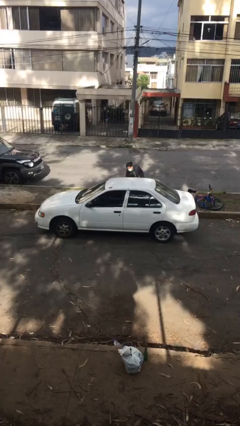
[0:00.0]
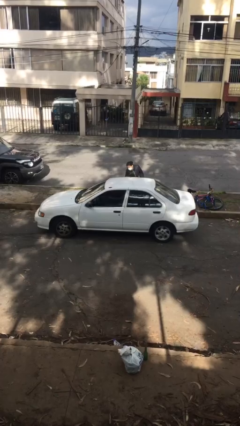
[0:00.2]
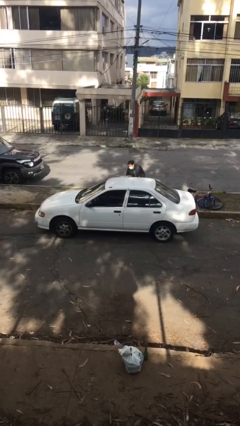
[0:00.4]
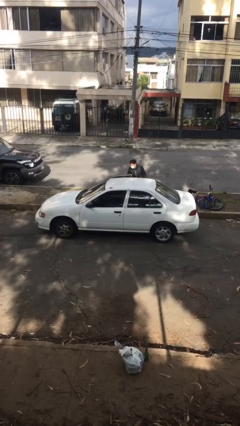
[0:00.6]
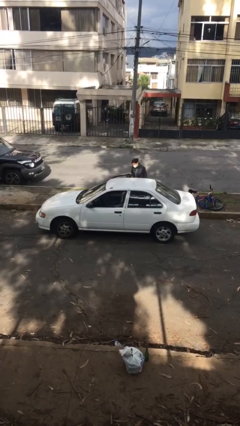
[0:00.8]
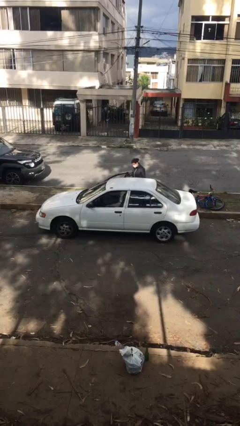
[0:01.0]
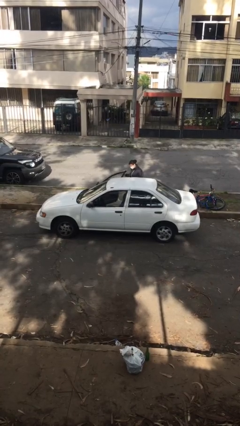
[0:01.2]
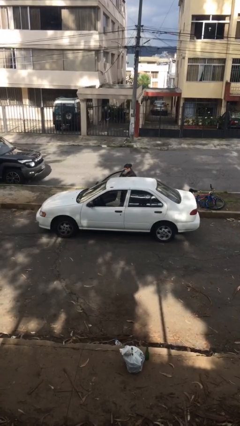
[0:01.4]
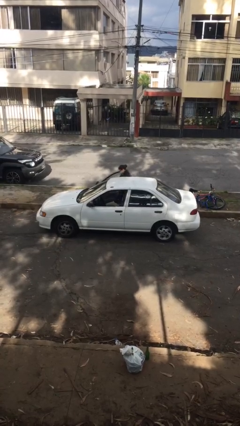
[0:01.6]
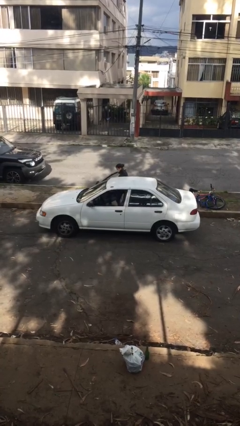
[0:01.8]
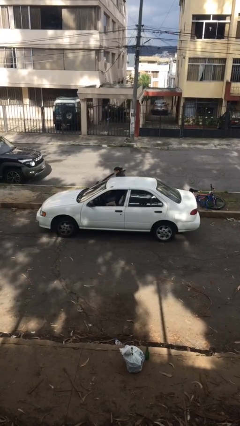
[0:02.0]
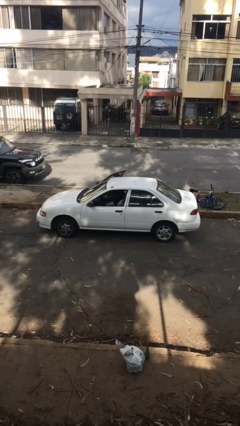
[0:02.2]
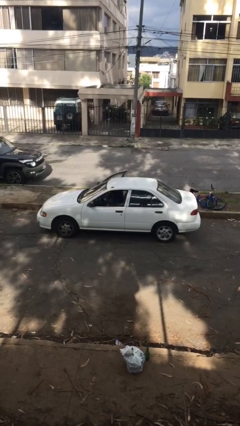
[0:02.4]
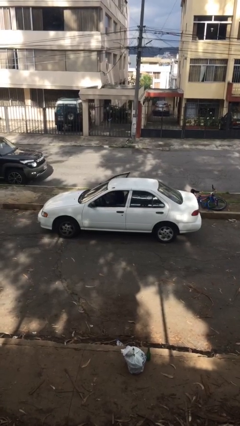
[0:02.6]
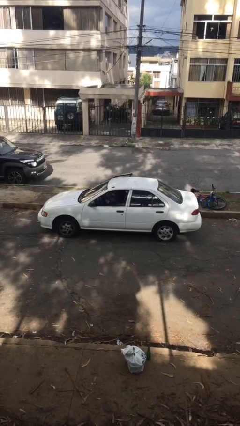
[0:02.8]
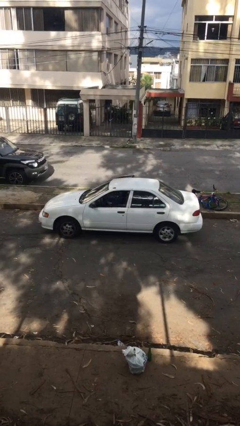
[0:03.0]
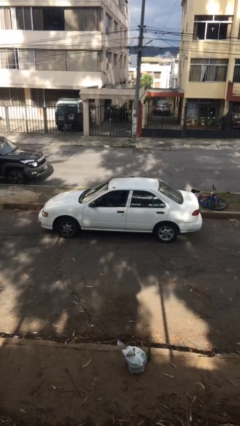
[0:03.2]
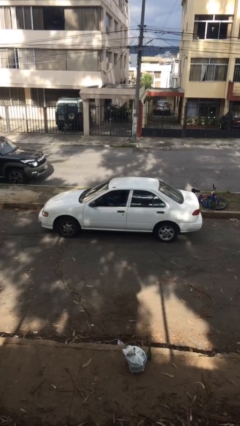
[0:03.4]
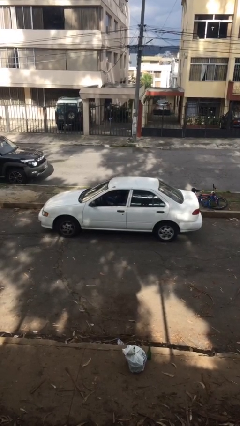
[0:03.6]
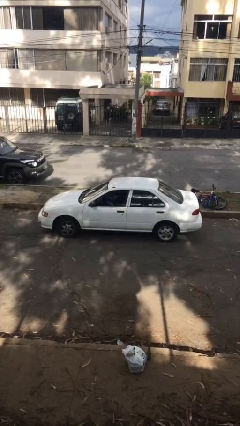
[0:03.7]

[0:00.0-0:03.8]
car picks up person

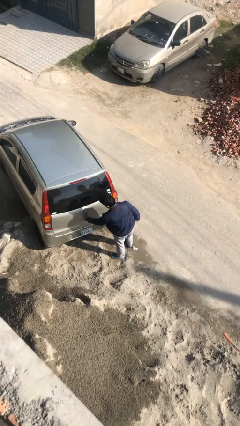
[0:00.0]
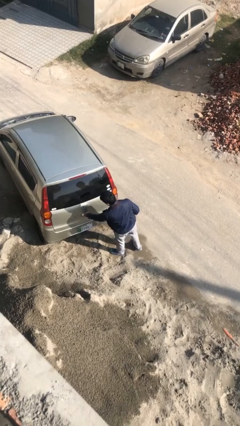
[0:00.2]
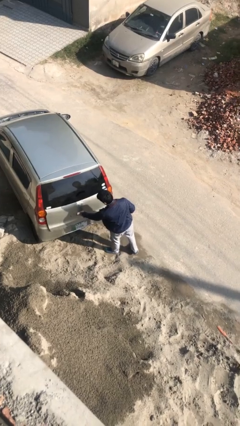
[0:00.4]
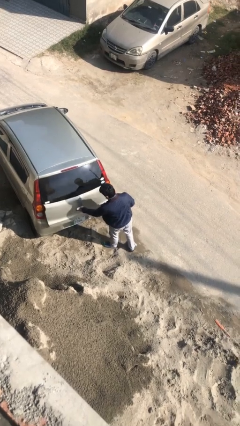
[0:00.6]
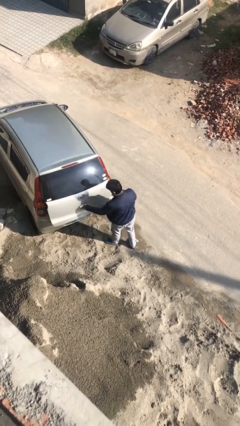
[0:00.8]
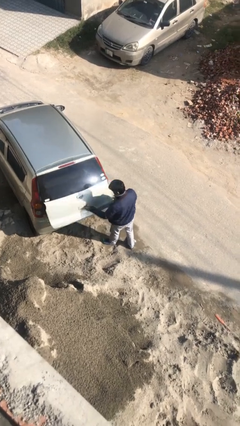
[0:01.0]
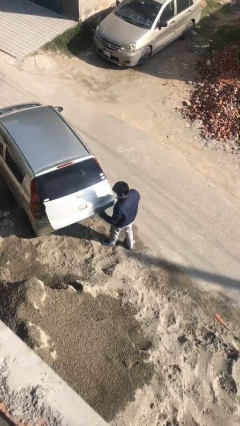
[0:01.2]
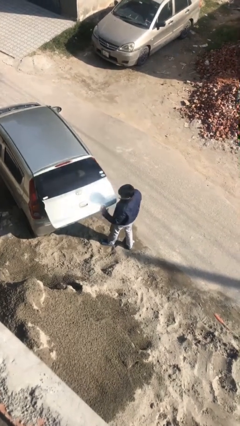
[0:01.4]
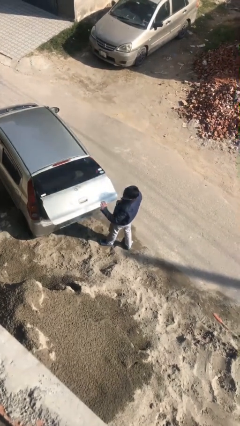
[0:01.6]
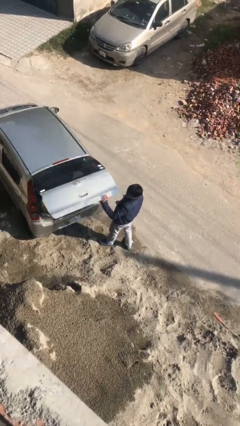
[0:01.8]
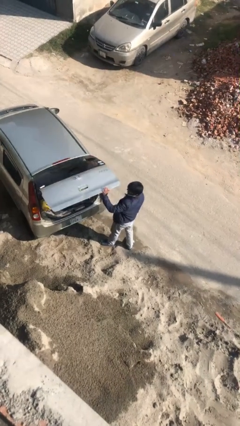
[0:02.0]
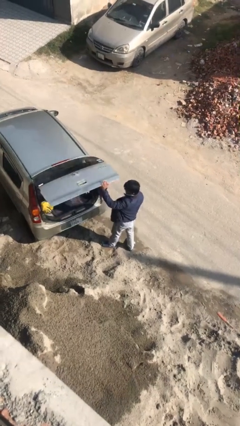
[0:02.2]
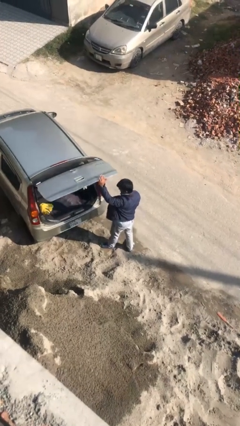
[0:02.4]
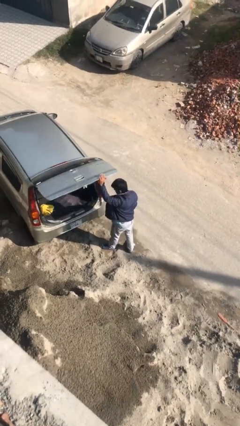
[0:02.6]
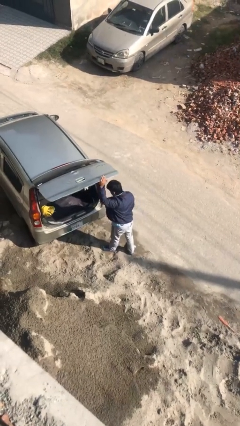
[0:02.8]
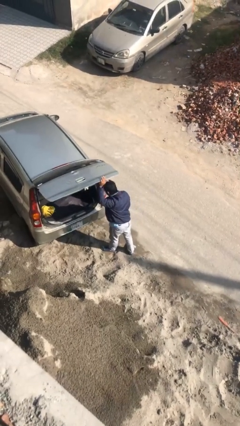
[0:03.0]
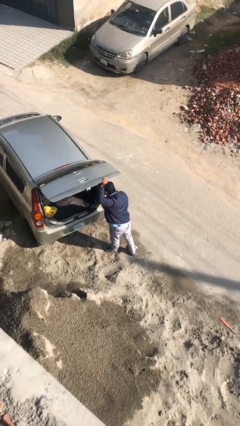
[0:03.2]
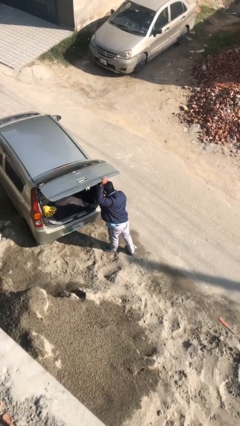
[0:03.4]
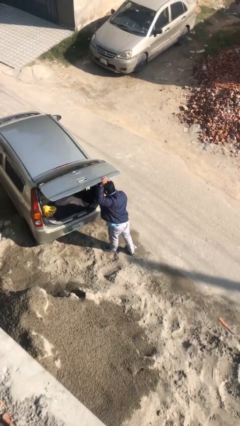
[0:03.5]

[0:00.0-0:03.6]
person opens car trunk

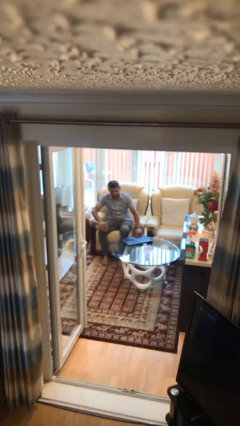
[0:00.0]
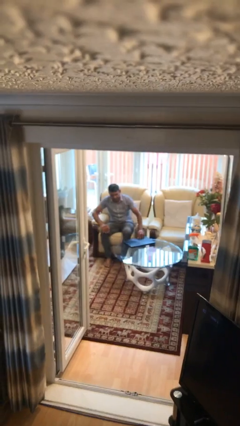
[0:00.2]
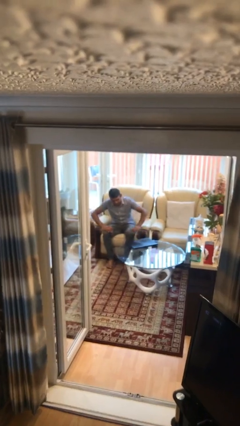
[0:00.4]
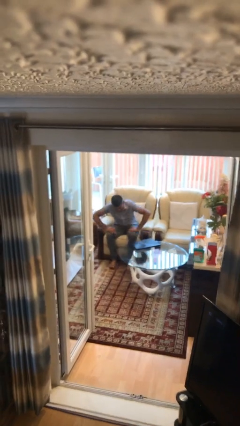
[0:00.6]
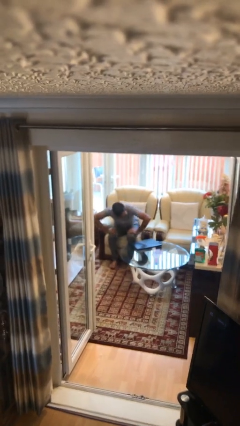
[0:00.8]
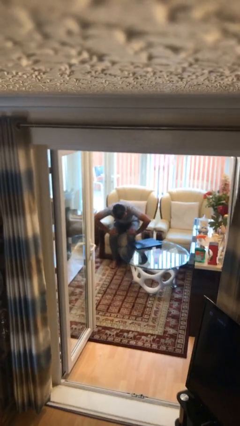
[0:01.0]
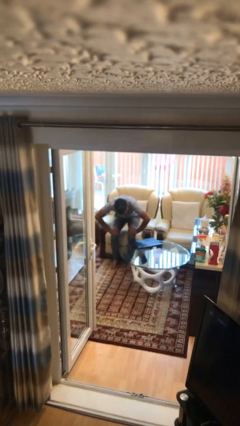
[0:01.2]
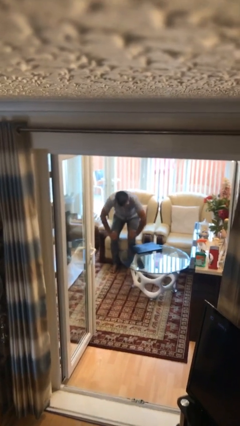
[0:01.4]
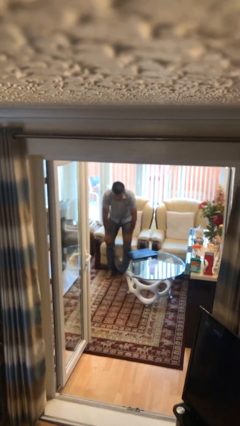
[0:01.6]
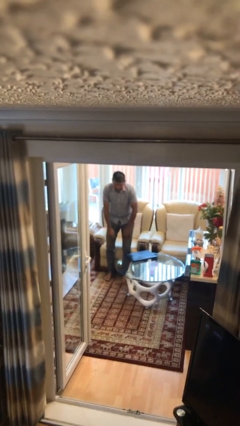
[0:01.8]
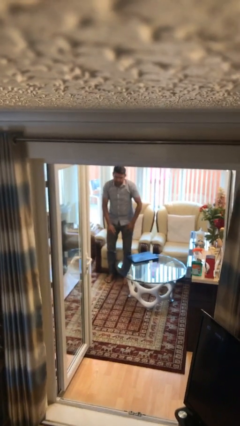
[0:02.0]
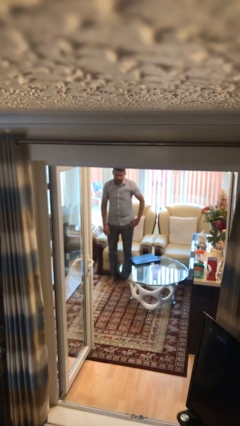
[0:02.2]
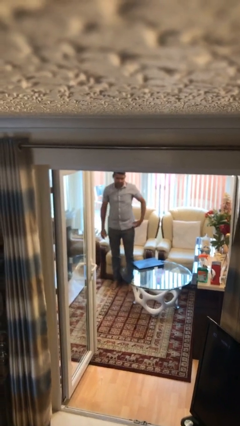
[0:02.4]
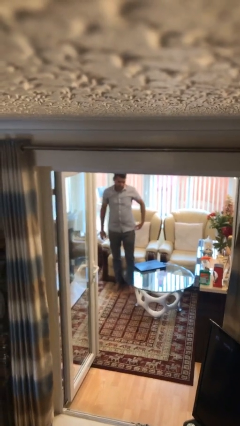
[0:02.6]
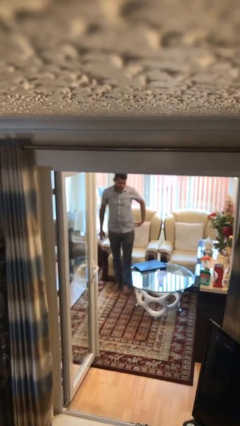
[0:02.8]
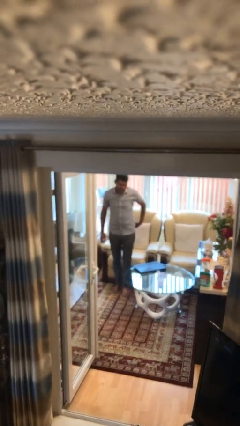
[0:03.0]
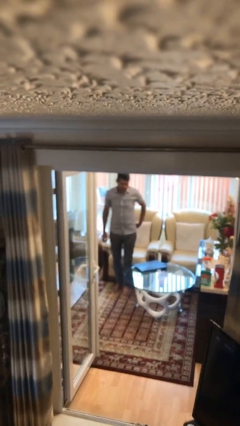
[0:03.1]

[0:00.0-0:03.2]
person stands up

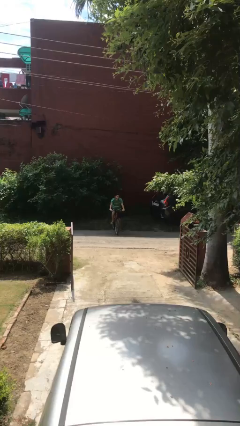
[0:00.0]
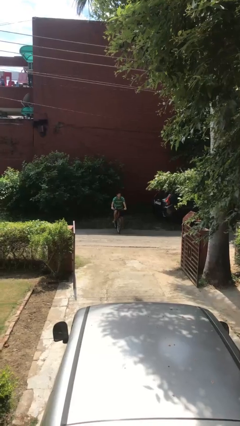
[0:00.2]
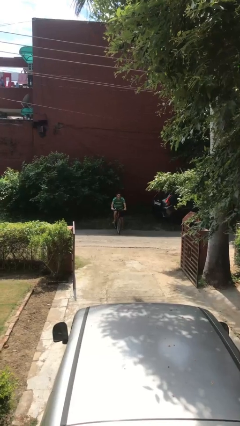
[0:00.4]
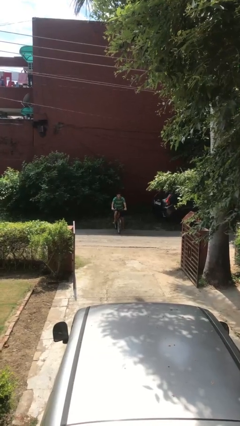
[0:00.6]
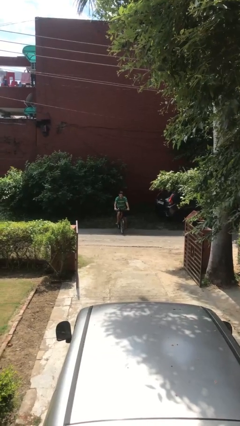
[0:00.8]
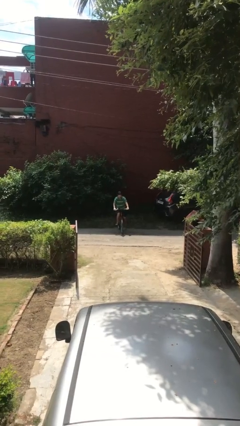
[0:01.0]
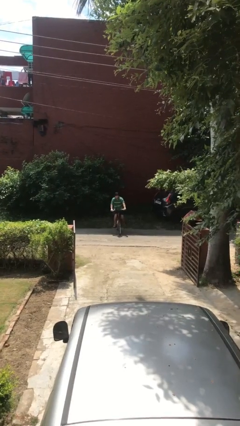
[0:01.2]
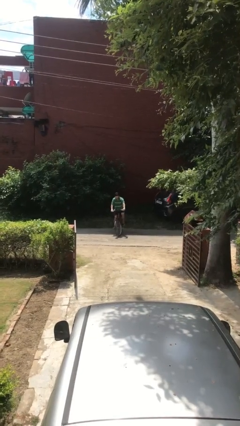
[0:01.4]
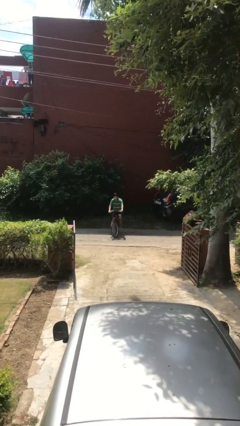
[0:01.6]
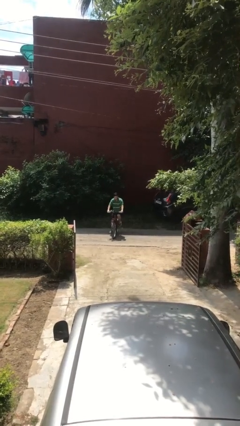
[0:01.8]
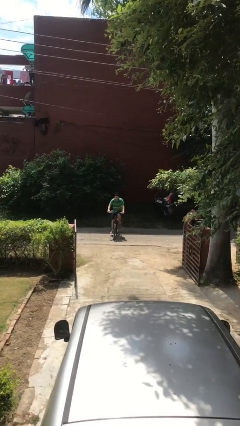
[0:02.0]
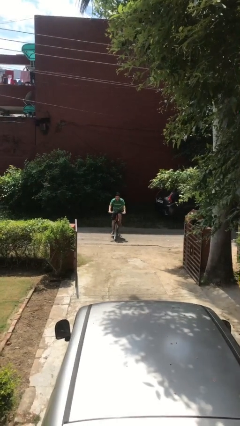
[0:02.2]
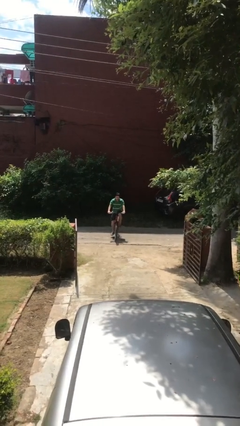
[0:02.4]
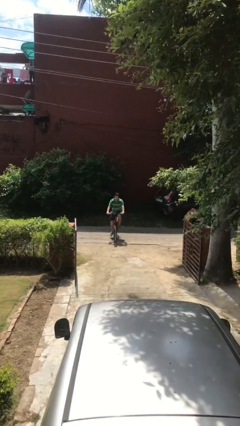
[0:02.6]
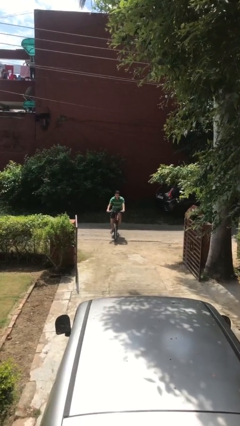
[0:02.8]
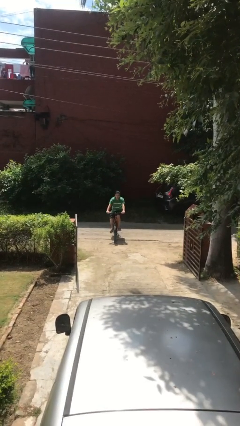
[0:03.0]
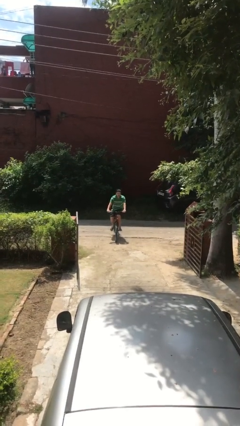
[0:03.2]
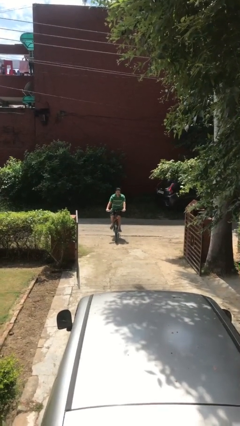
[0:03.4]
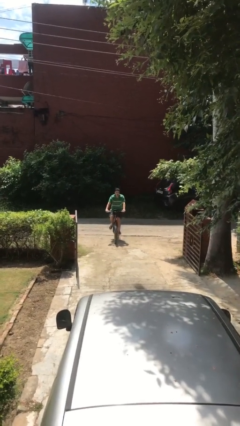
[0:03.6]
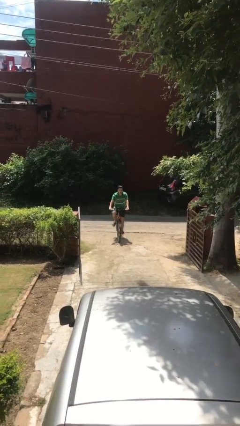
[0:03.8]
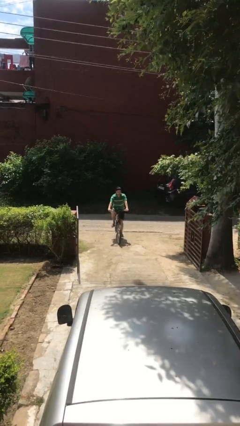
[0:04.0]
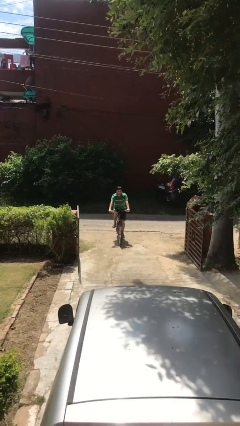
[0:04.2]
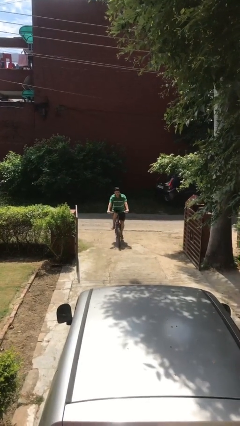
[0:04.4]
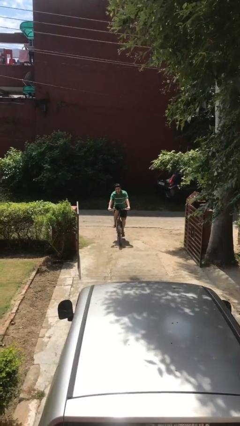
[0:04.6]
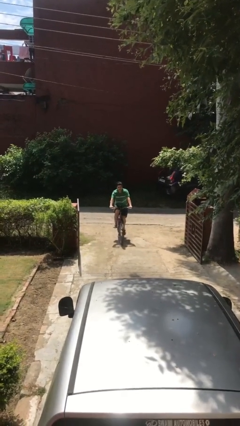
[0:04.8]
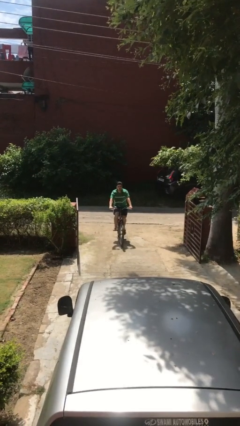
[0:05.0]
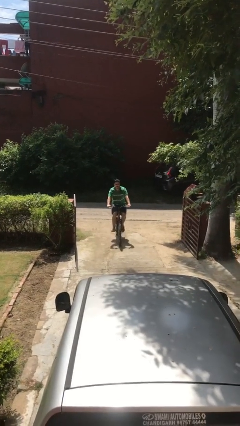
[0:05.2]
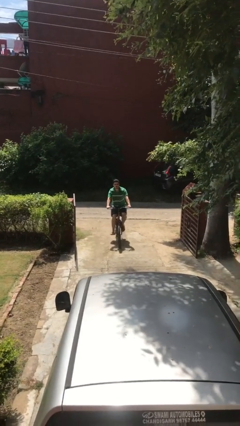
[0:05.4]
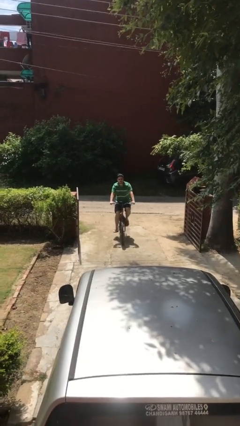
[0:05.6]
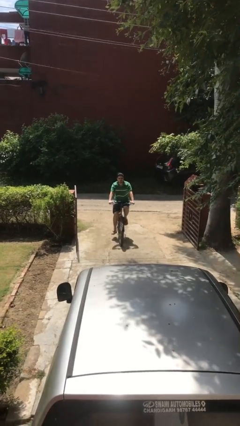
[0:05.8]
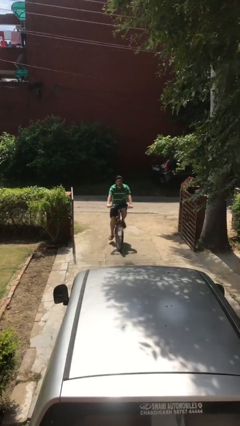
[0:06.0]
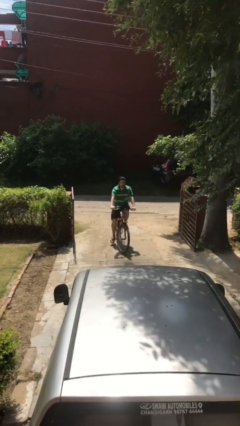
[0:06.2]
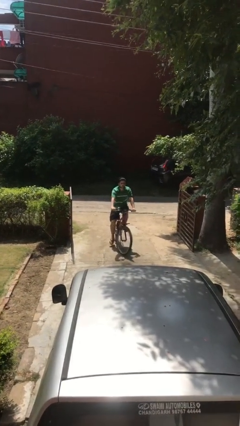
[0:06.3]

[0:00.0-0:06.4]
person rides bicycle

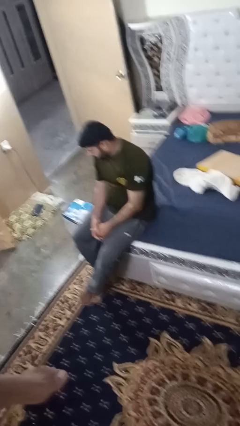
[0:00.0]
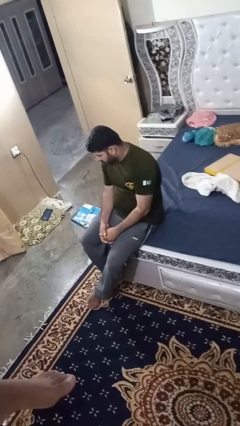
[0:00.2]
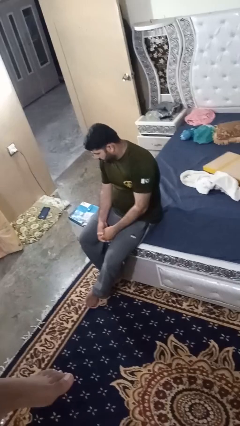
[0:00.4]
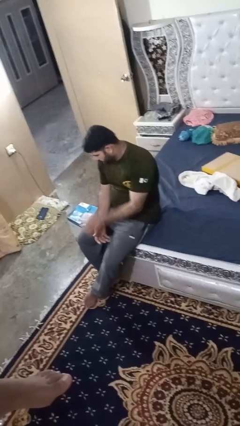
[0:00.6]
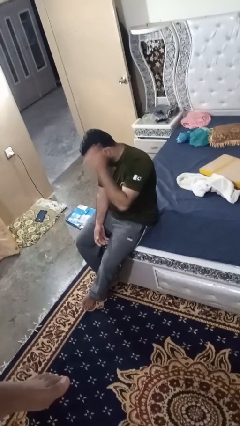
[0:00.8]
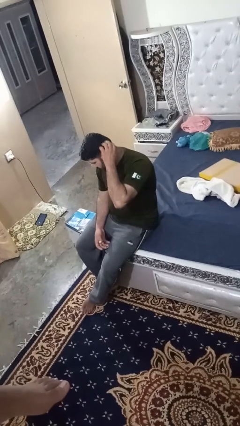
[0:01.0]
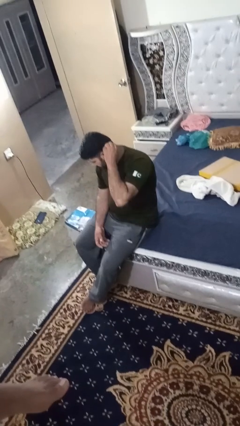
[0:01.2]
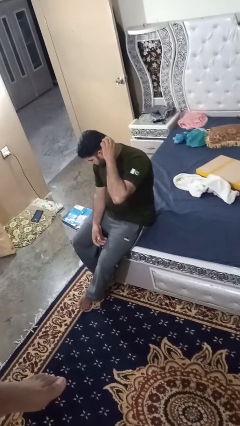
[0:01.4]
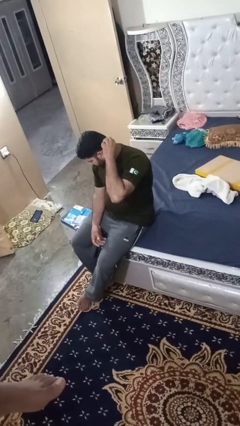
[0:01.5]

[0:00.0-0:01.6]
person strokes hair
